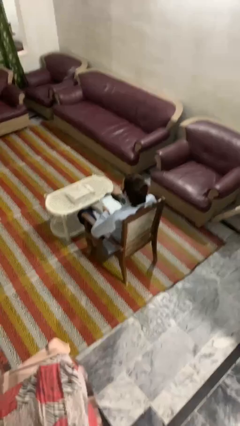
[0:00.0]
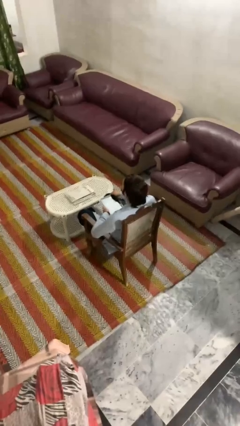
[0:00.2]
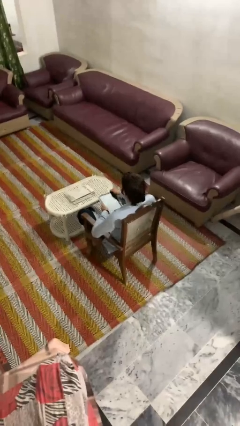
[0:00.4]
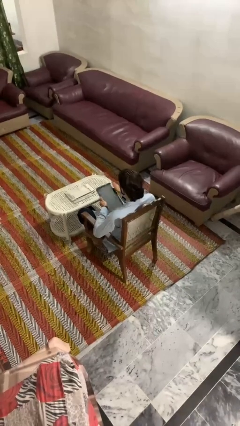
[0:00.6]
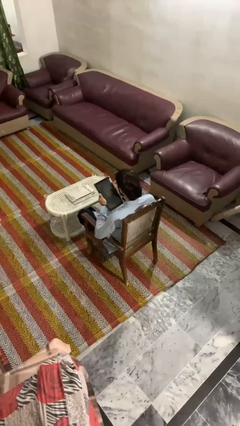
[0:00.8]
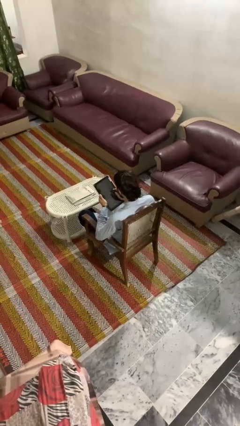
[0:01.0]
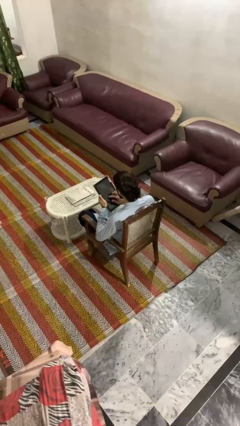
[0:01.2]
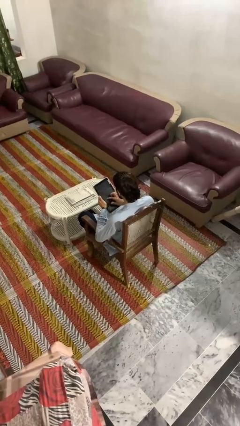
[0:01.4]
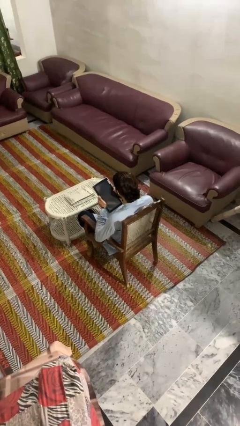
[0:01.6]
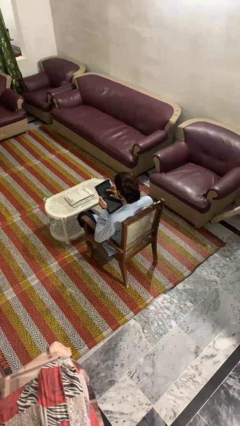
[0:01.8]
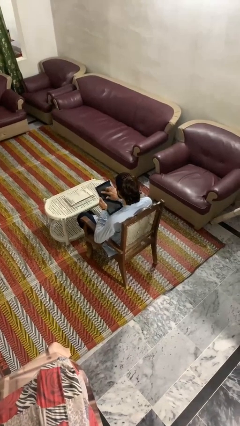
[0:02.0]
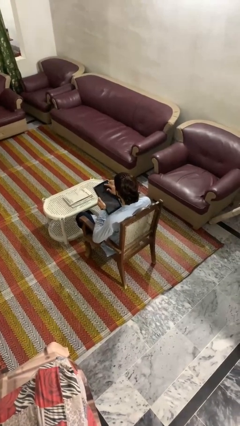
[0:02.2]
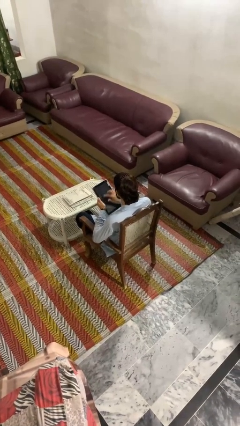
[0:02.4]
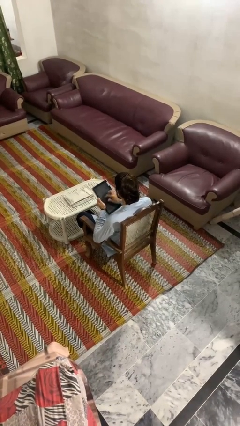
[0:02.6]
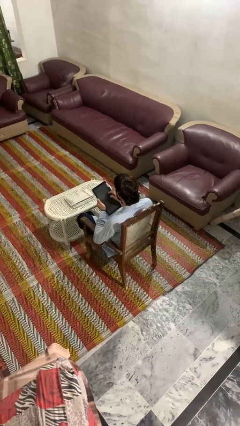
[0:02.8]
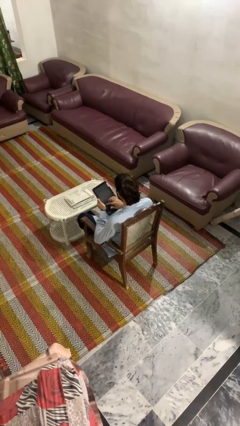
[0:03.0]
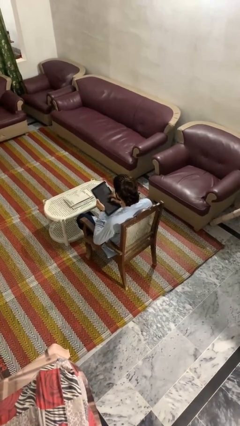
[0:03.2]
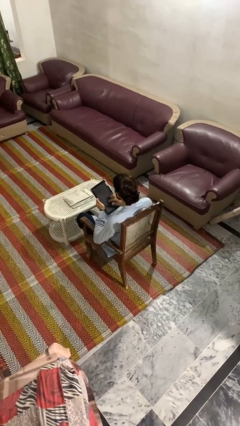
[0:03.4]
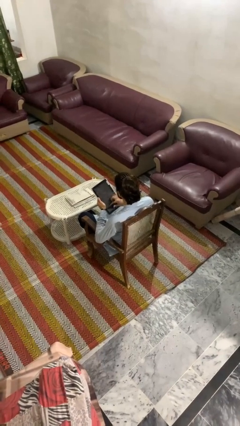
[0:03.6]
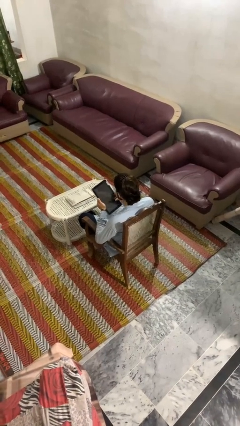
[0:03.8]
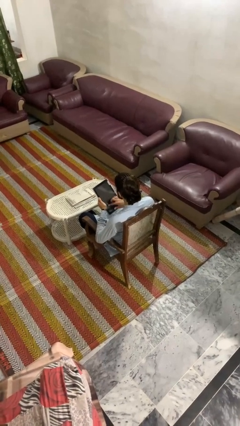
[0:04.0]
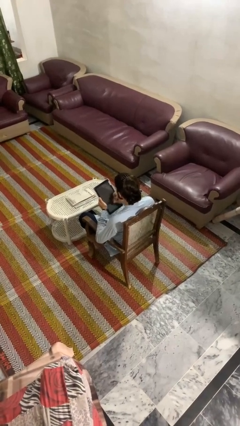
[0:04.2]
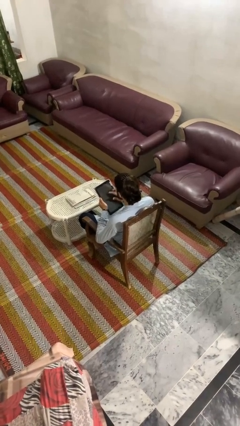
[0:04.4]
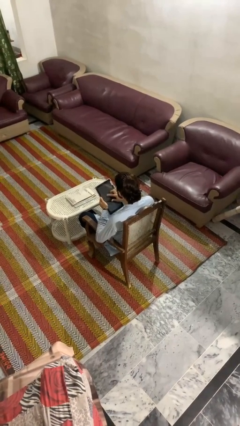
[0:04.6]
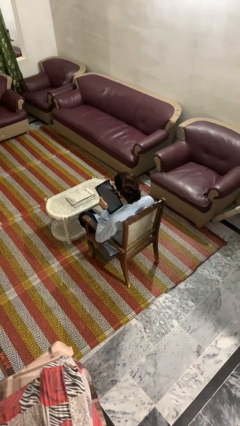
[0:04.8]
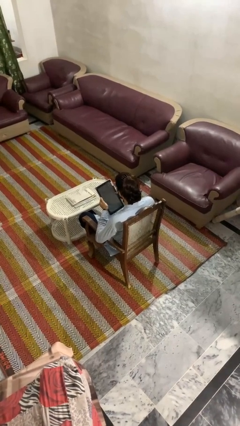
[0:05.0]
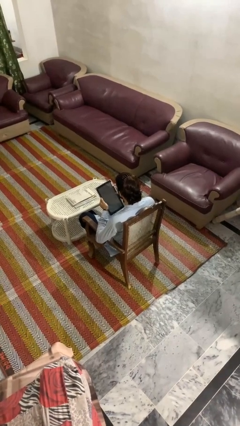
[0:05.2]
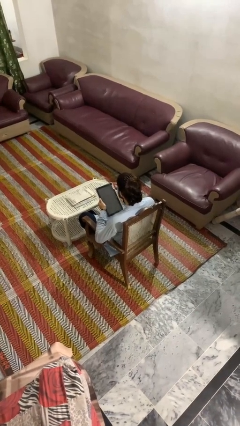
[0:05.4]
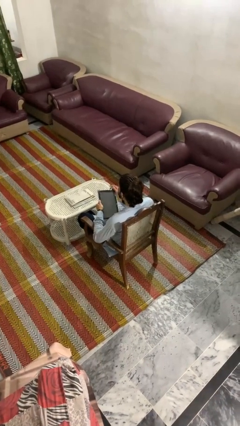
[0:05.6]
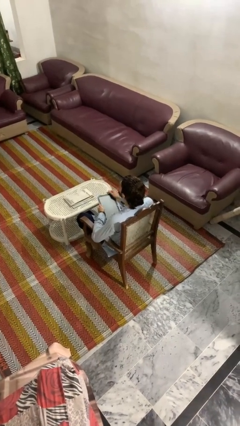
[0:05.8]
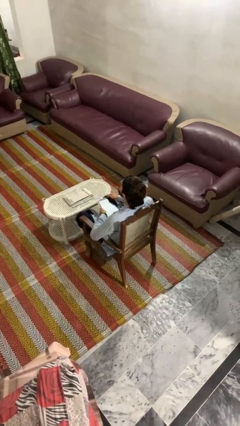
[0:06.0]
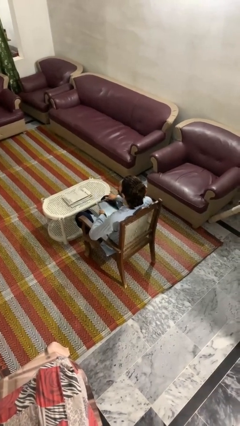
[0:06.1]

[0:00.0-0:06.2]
person interacts with tablet

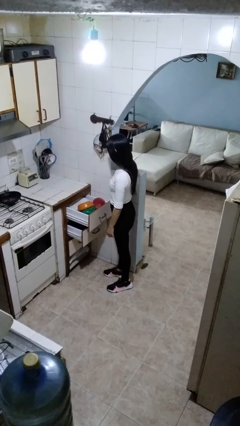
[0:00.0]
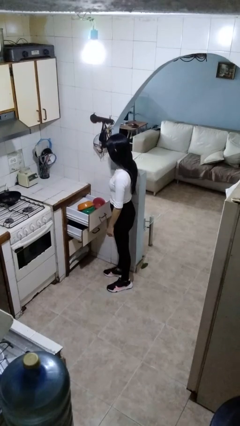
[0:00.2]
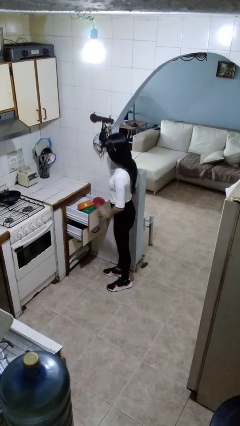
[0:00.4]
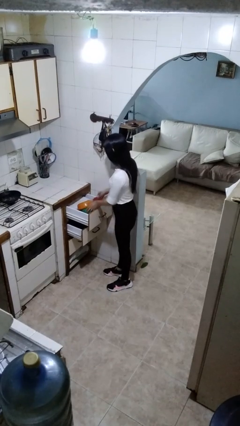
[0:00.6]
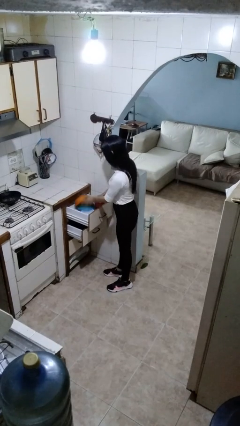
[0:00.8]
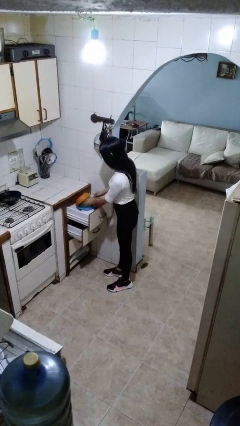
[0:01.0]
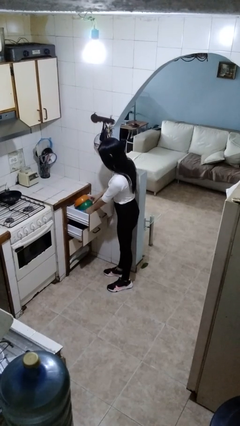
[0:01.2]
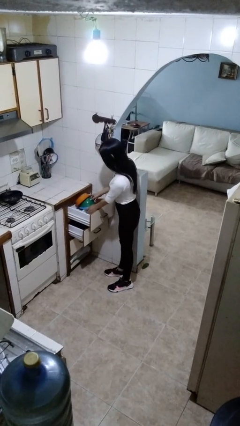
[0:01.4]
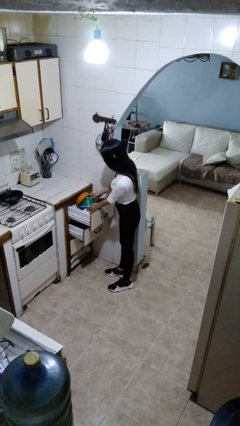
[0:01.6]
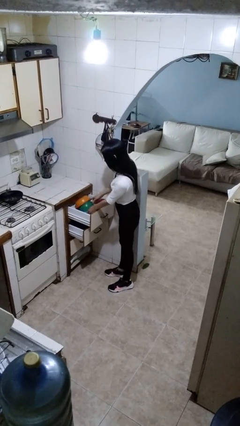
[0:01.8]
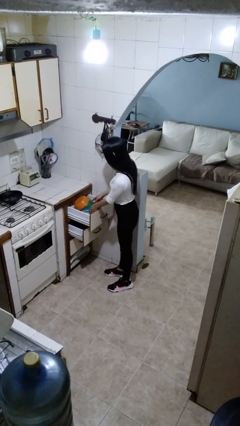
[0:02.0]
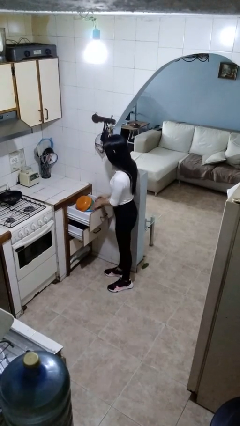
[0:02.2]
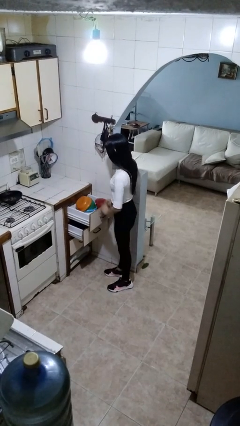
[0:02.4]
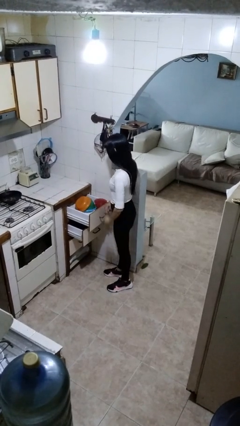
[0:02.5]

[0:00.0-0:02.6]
person searches in kitchen drawer

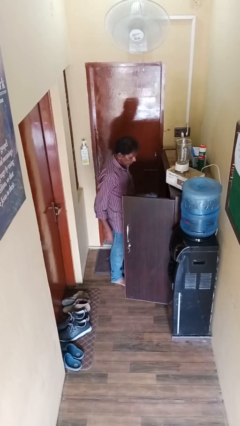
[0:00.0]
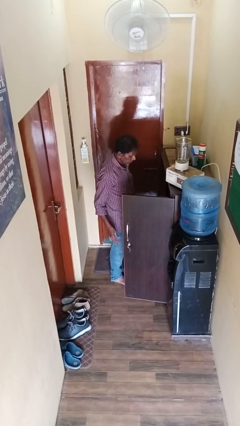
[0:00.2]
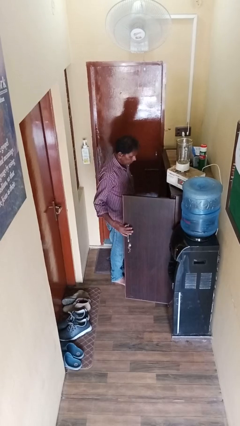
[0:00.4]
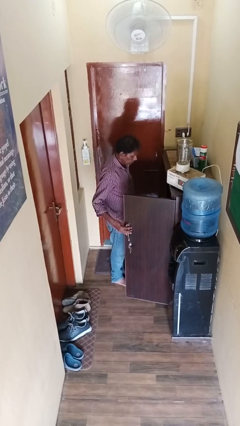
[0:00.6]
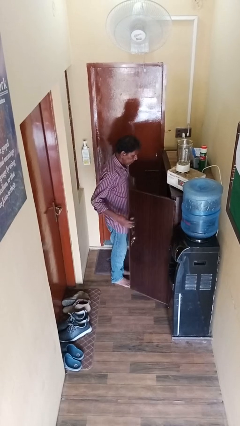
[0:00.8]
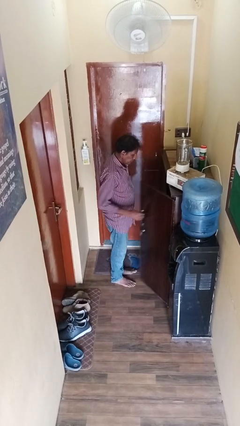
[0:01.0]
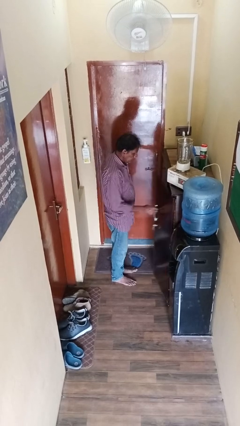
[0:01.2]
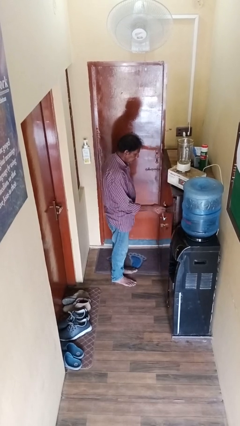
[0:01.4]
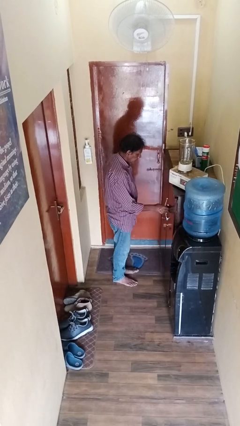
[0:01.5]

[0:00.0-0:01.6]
person closes cabinet

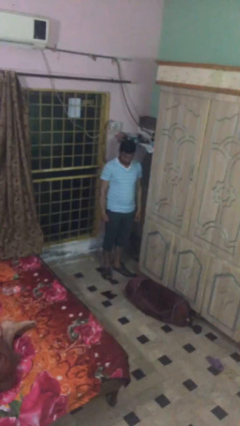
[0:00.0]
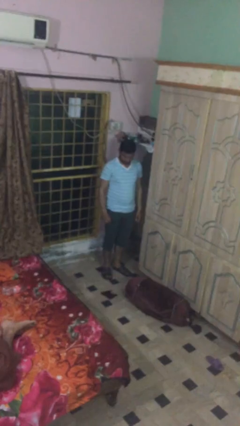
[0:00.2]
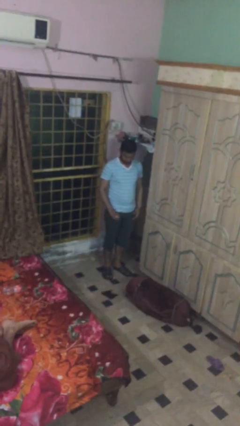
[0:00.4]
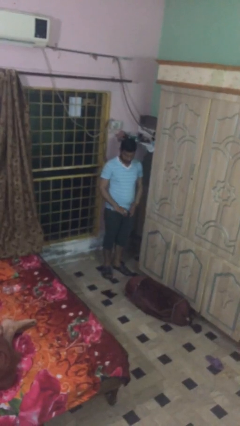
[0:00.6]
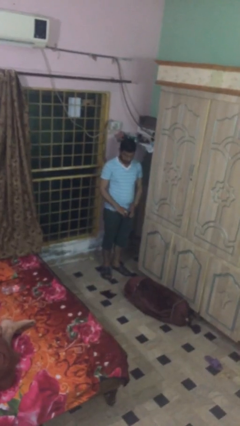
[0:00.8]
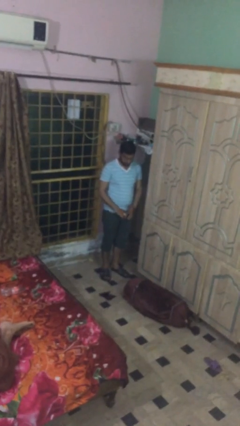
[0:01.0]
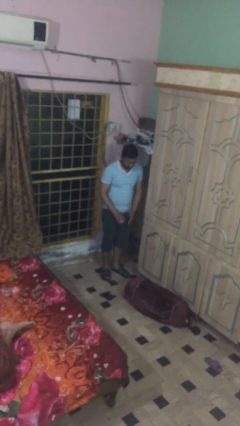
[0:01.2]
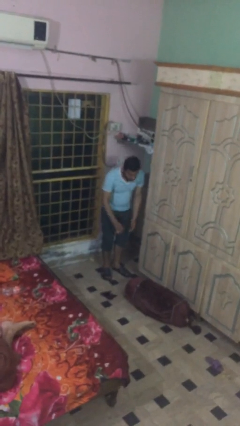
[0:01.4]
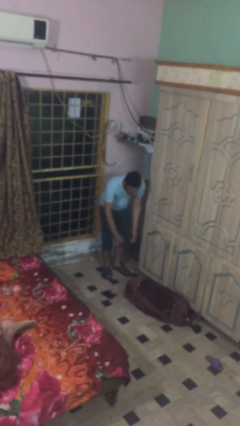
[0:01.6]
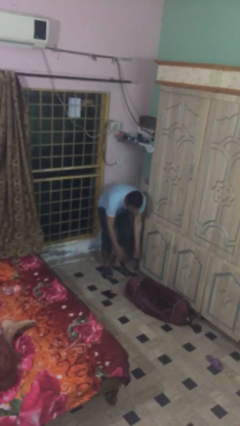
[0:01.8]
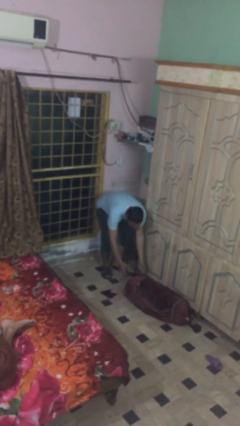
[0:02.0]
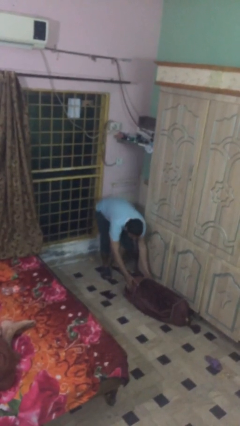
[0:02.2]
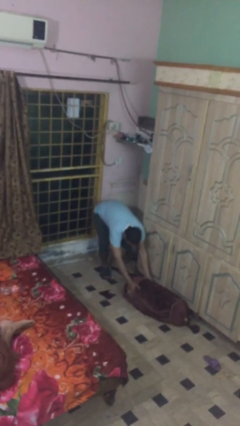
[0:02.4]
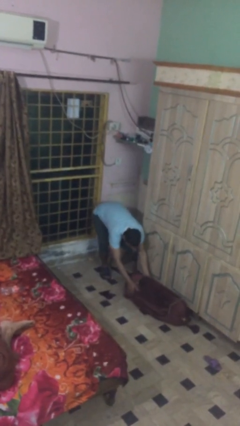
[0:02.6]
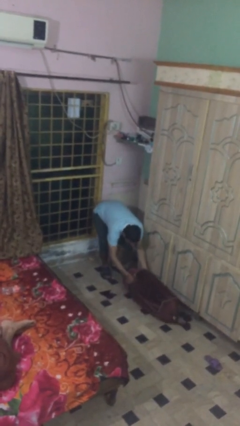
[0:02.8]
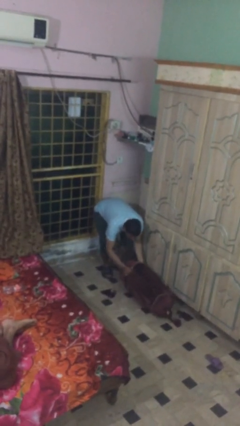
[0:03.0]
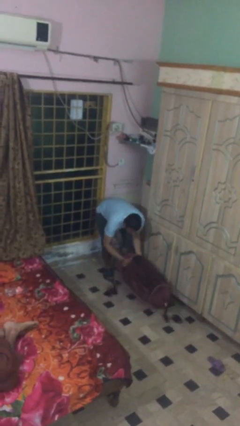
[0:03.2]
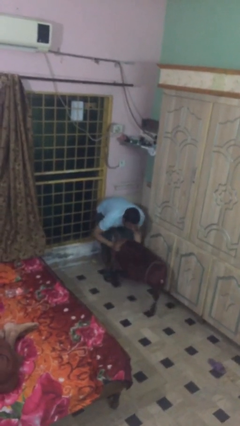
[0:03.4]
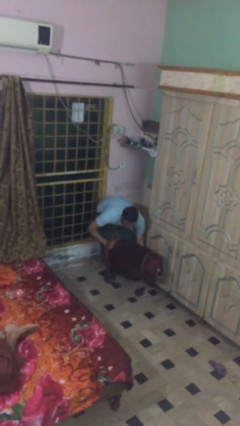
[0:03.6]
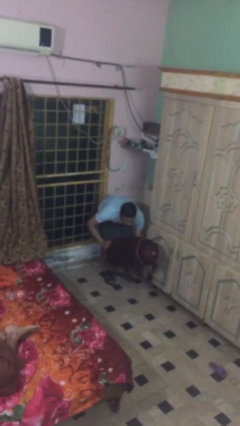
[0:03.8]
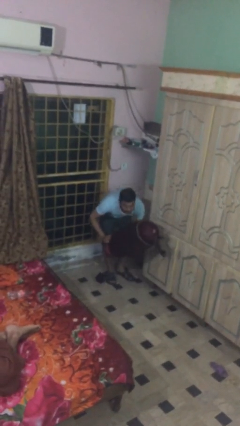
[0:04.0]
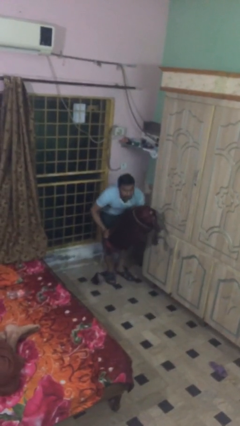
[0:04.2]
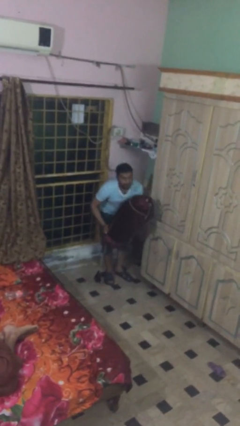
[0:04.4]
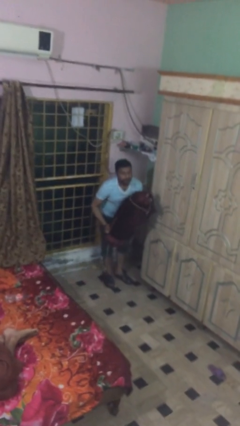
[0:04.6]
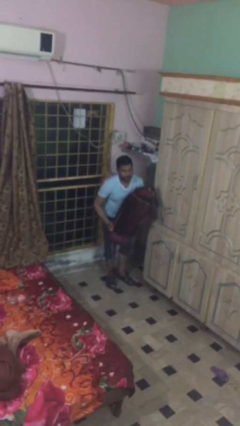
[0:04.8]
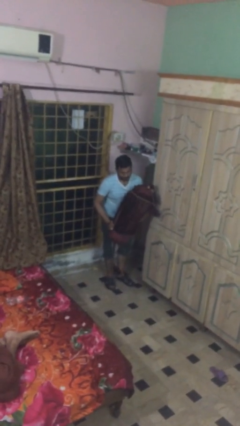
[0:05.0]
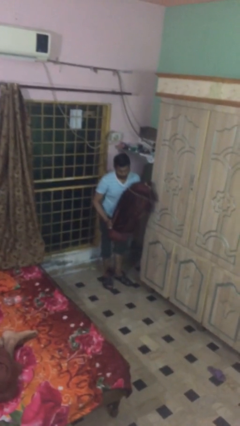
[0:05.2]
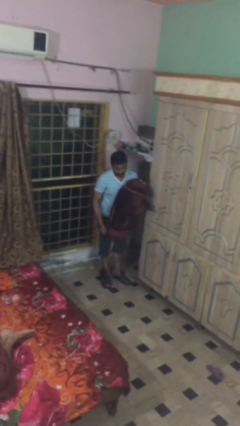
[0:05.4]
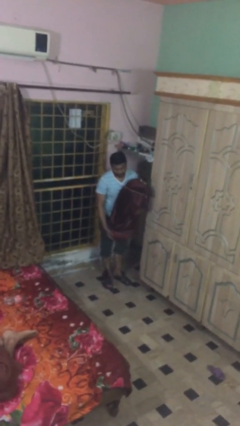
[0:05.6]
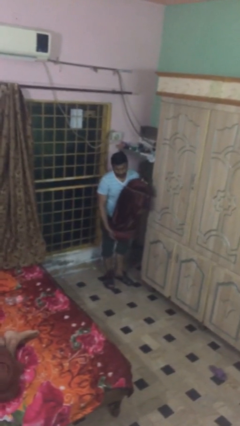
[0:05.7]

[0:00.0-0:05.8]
person picks up object from floor

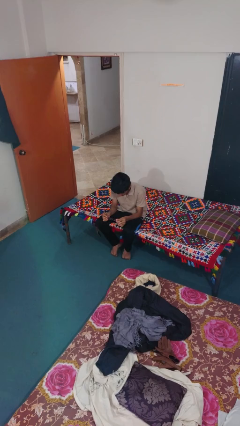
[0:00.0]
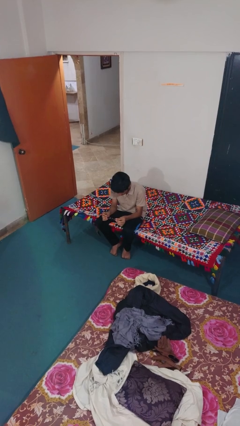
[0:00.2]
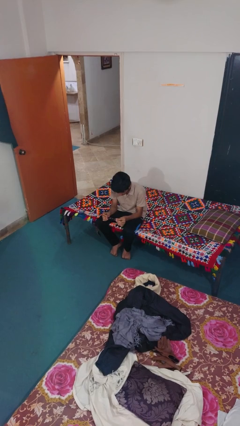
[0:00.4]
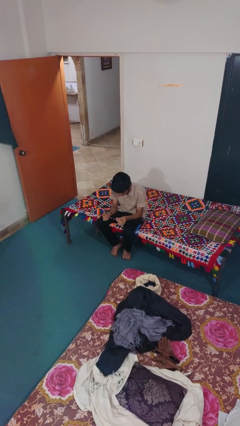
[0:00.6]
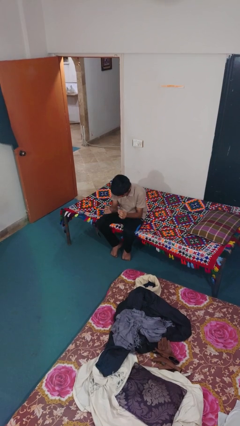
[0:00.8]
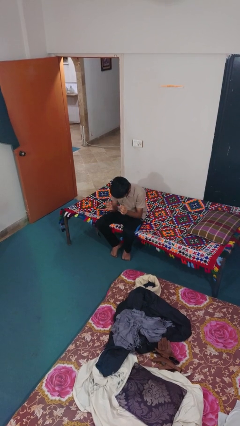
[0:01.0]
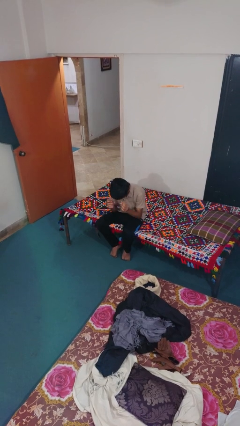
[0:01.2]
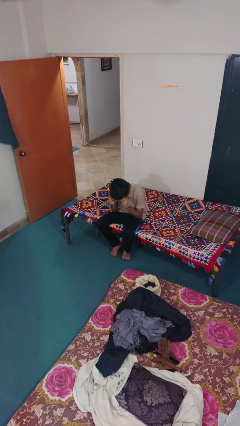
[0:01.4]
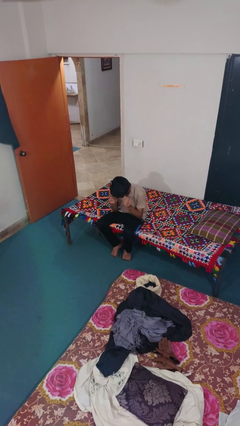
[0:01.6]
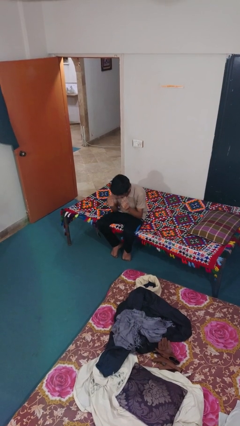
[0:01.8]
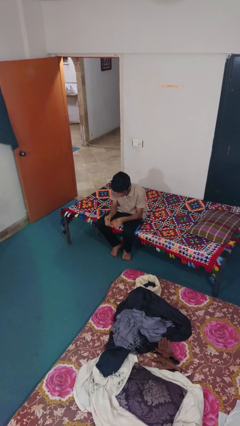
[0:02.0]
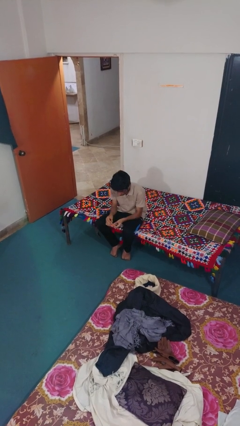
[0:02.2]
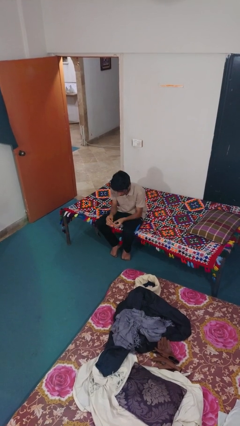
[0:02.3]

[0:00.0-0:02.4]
person puts on glasses
